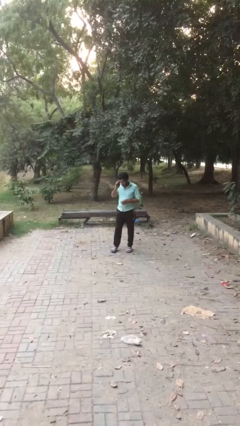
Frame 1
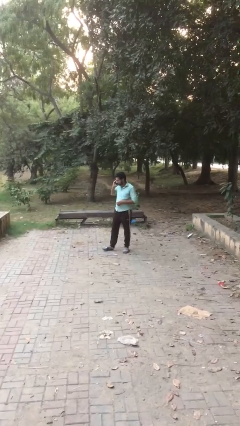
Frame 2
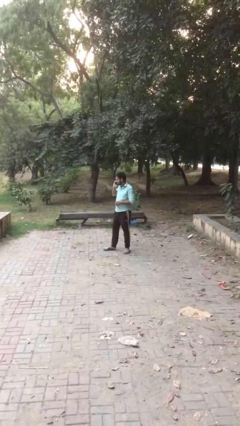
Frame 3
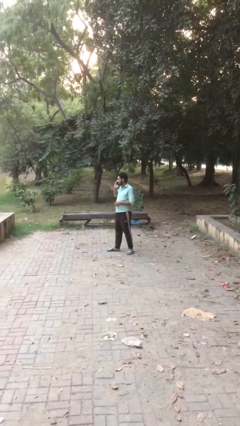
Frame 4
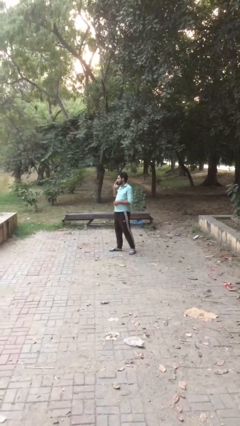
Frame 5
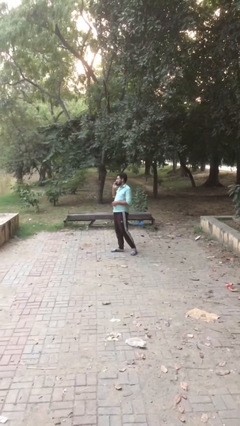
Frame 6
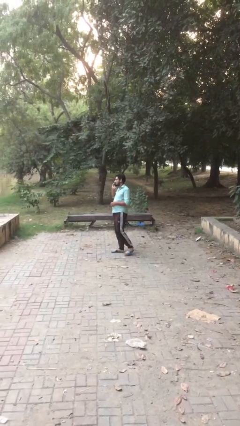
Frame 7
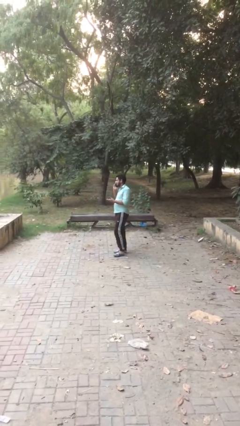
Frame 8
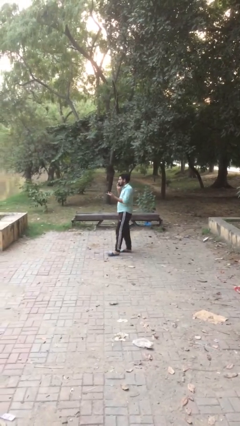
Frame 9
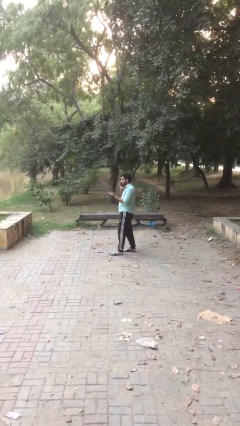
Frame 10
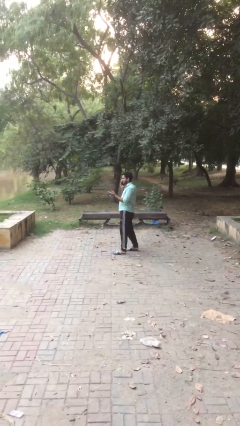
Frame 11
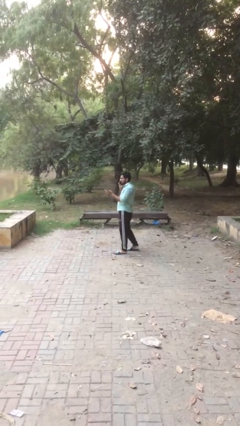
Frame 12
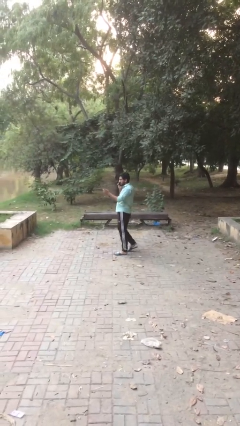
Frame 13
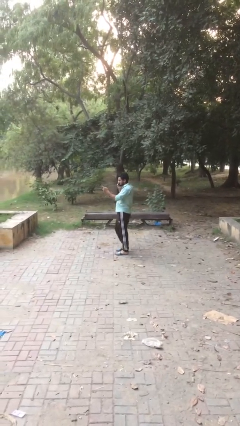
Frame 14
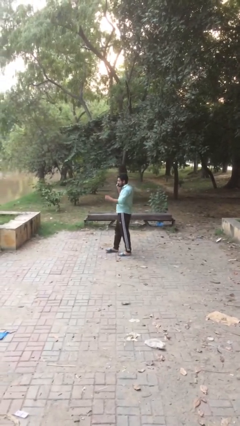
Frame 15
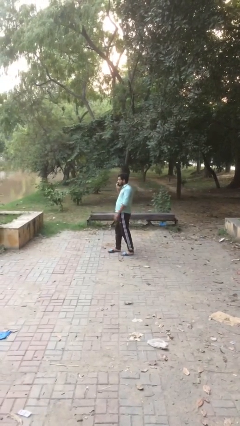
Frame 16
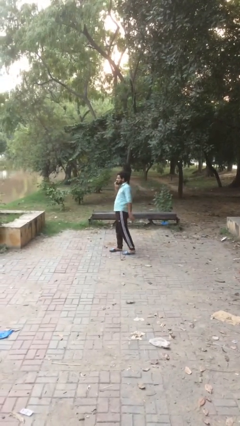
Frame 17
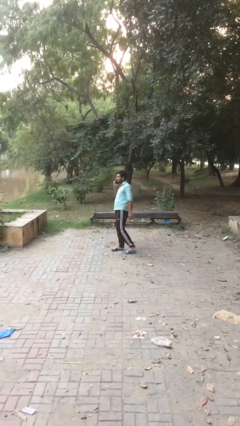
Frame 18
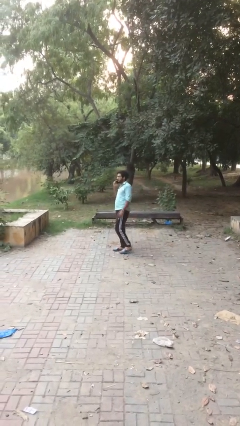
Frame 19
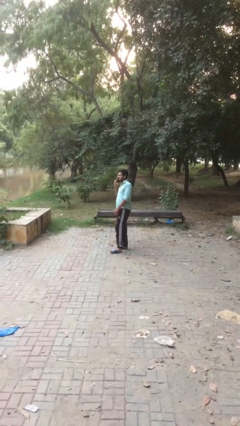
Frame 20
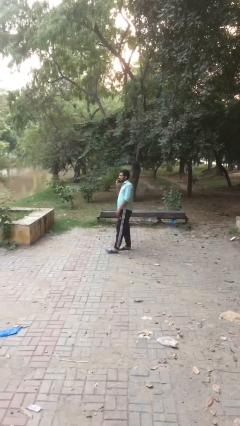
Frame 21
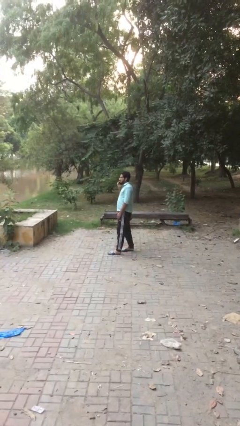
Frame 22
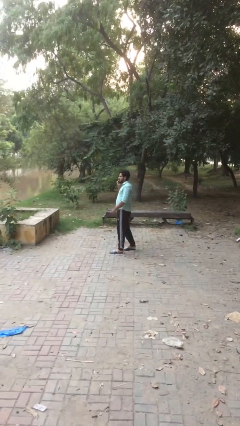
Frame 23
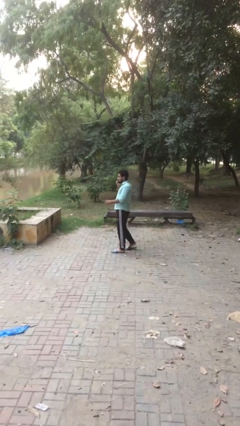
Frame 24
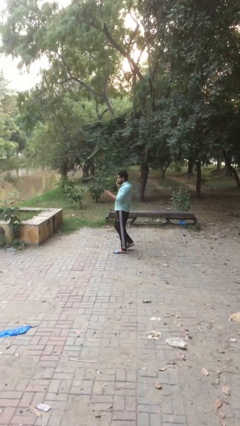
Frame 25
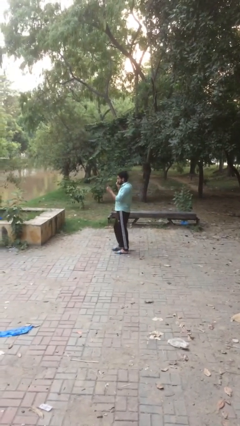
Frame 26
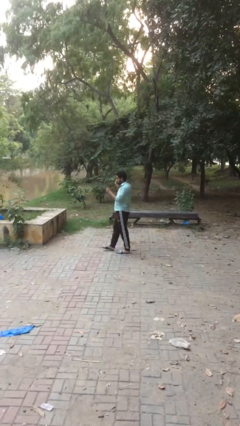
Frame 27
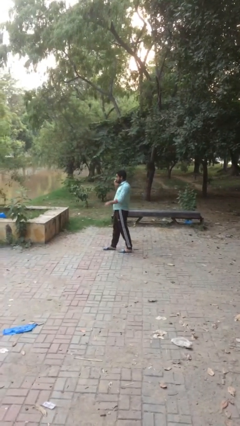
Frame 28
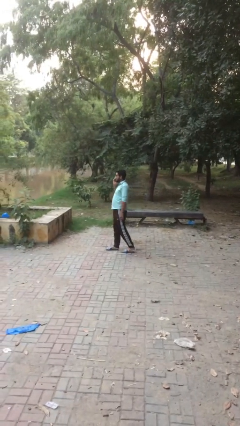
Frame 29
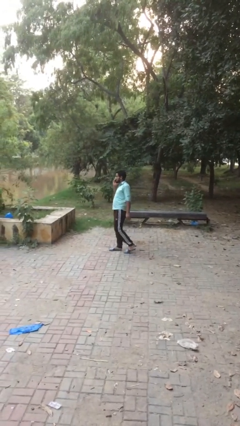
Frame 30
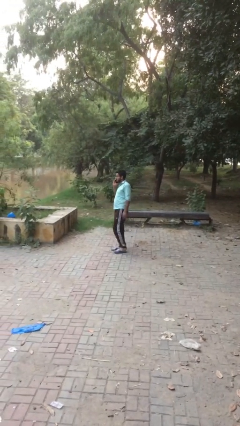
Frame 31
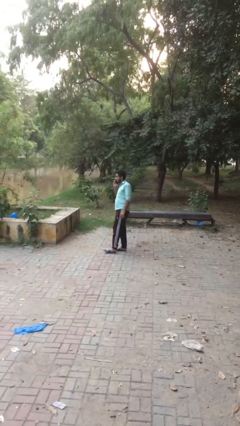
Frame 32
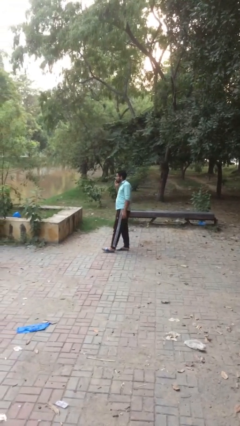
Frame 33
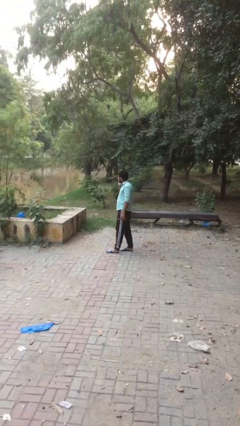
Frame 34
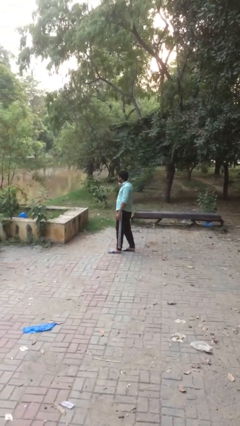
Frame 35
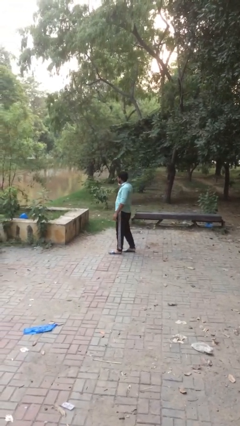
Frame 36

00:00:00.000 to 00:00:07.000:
person talks on phone

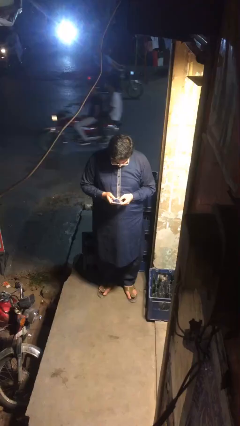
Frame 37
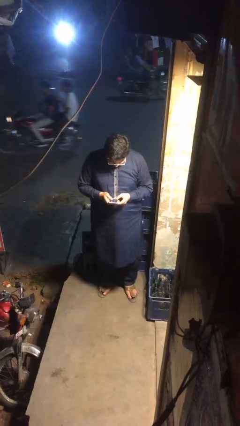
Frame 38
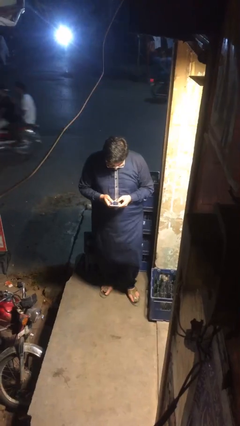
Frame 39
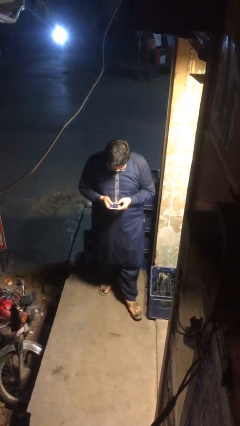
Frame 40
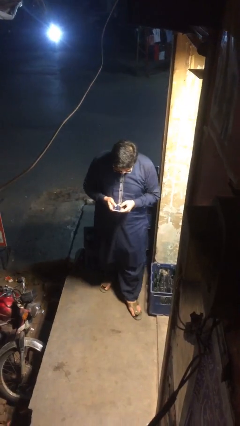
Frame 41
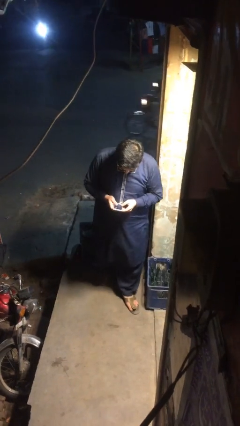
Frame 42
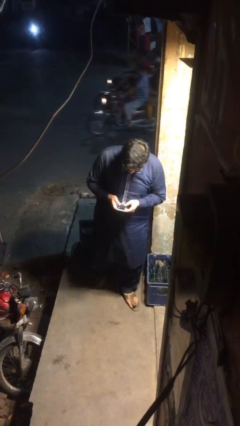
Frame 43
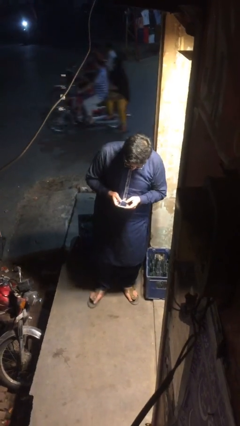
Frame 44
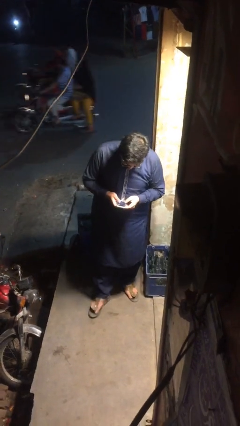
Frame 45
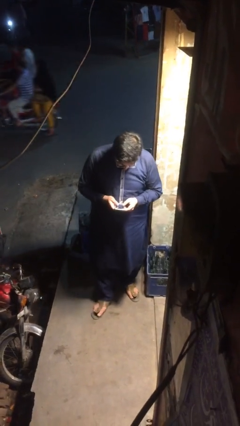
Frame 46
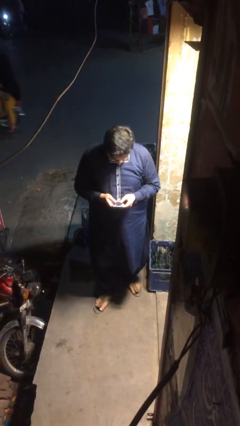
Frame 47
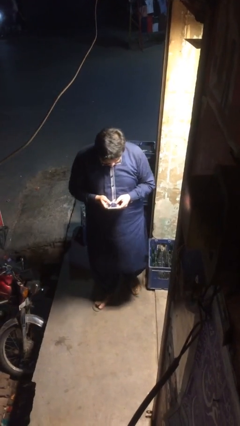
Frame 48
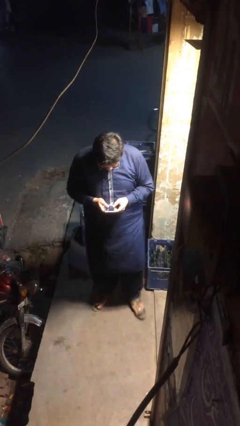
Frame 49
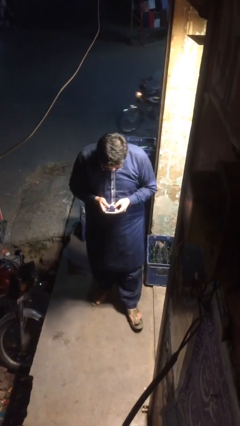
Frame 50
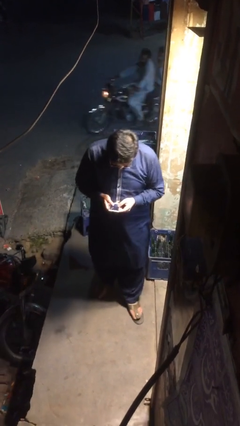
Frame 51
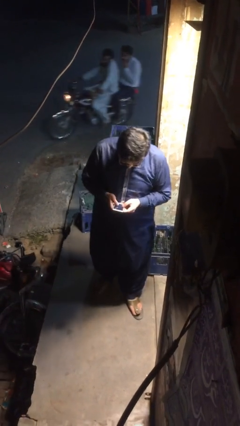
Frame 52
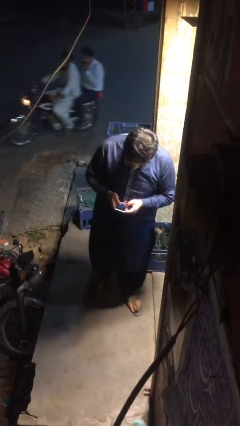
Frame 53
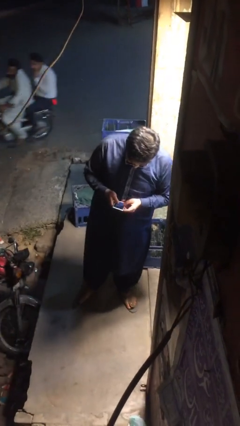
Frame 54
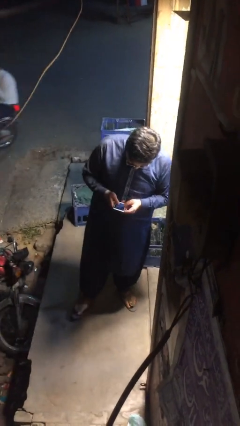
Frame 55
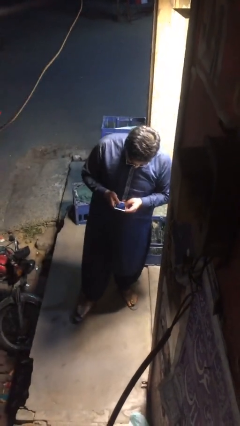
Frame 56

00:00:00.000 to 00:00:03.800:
person texts on phone

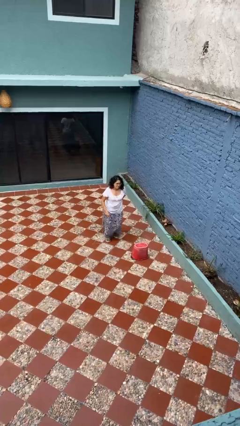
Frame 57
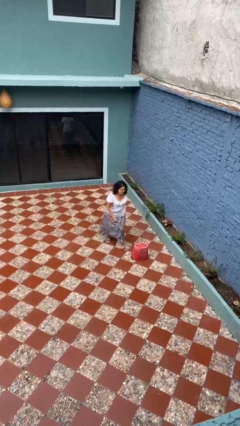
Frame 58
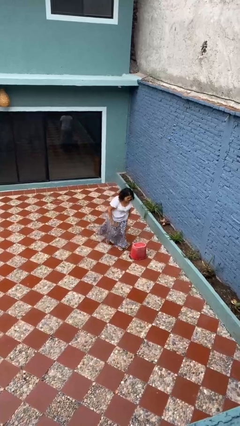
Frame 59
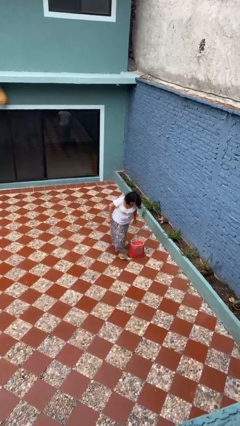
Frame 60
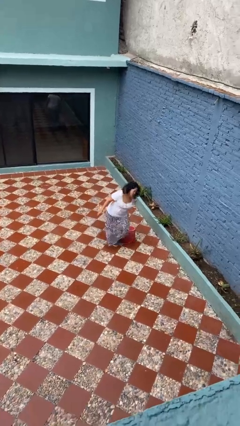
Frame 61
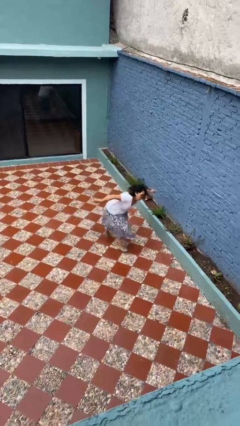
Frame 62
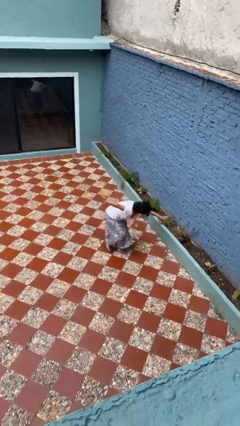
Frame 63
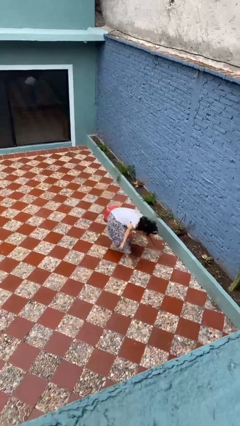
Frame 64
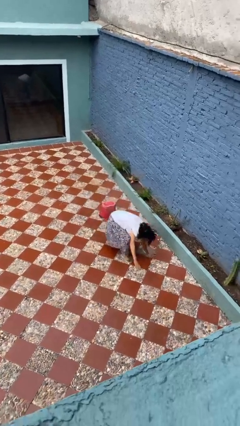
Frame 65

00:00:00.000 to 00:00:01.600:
person trips on object on floor

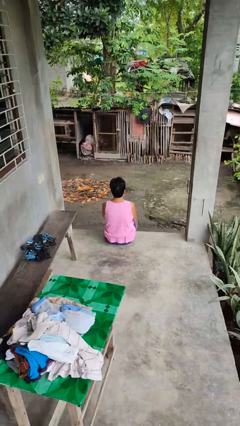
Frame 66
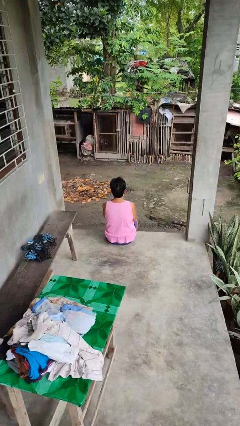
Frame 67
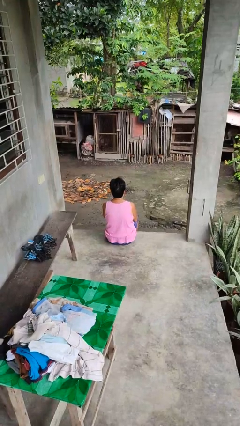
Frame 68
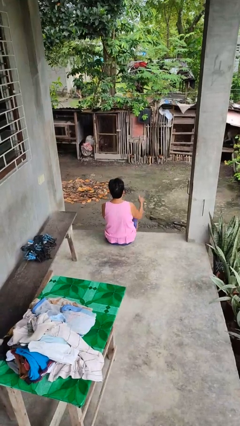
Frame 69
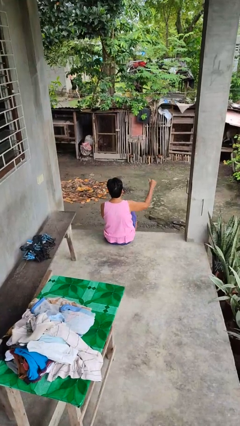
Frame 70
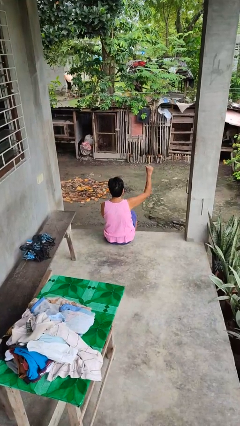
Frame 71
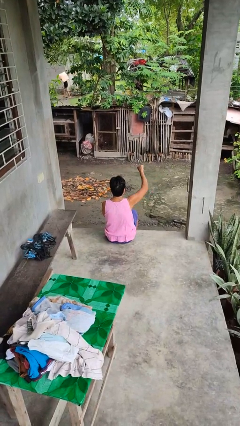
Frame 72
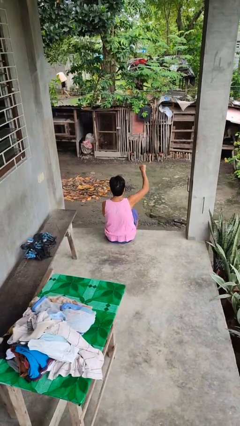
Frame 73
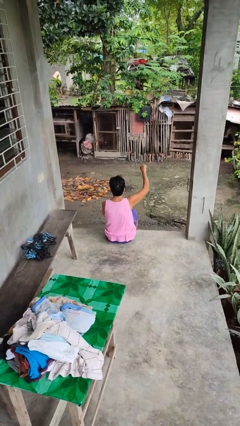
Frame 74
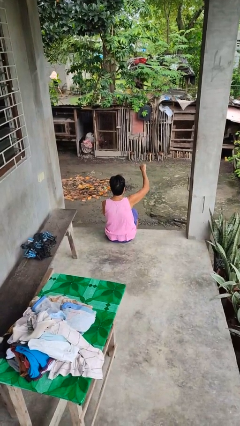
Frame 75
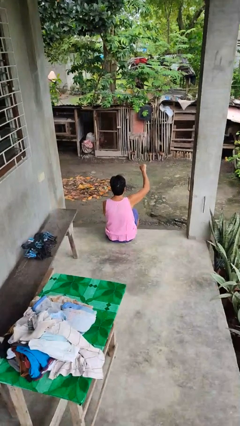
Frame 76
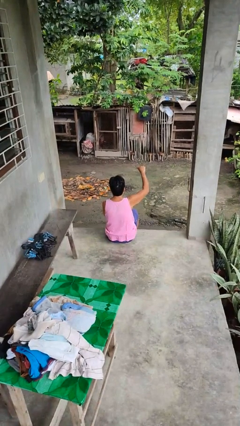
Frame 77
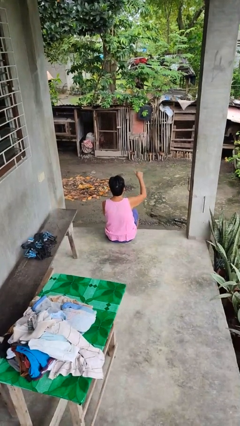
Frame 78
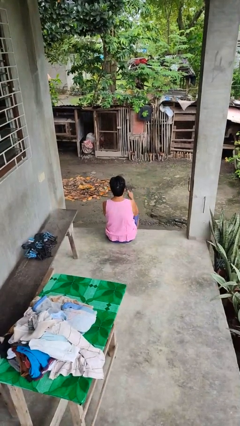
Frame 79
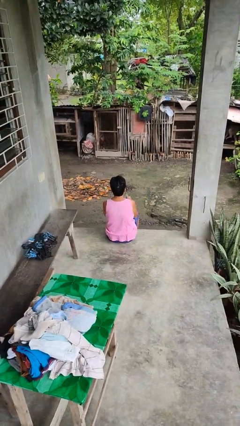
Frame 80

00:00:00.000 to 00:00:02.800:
person gestures thumbs down

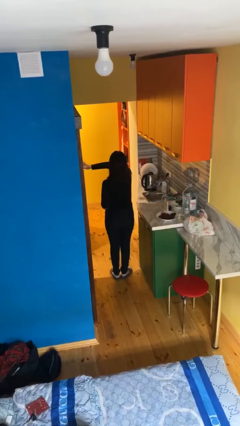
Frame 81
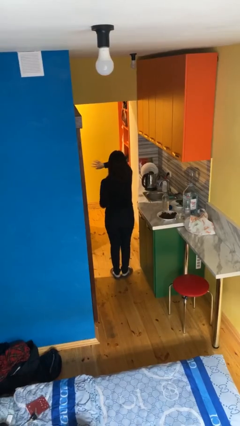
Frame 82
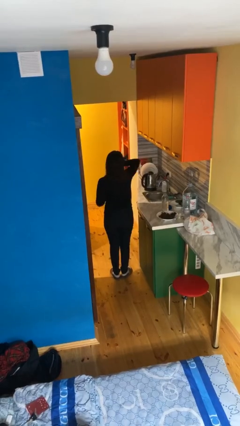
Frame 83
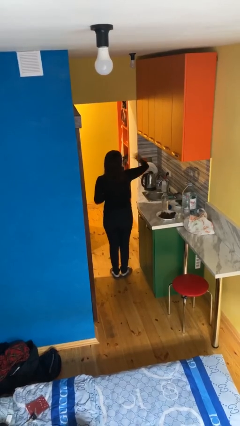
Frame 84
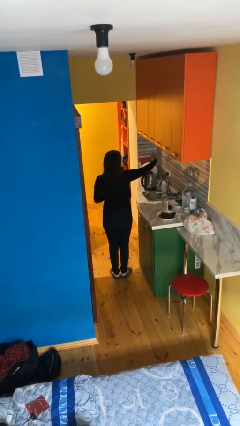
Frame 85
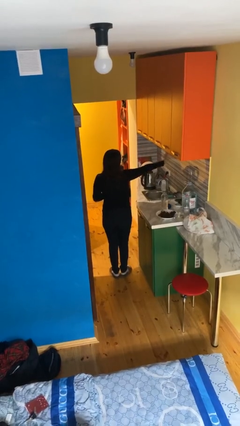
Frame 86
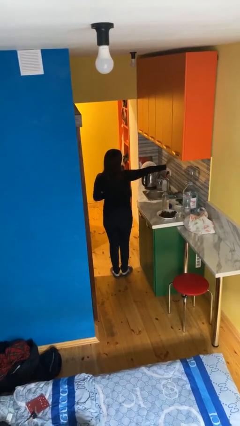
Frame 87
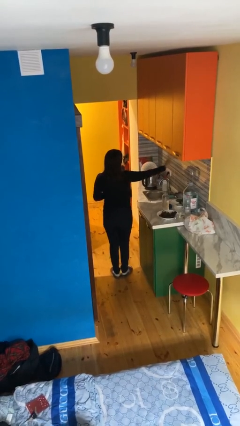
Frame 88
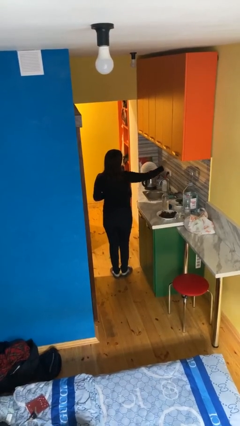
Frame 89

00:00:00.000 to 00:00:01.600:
person gestures swipe right

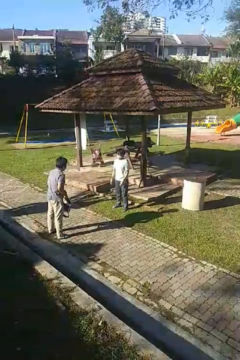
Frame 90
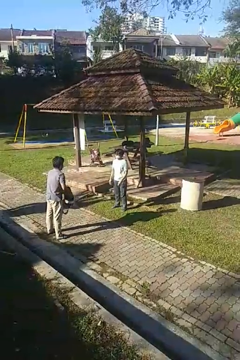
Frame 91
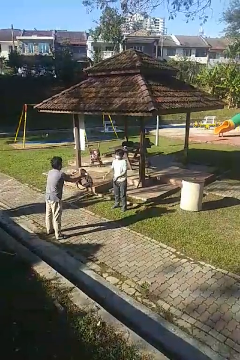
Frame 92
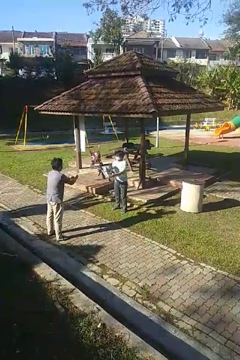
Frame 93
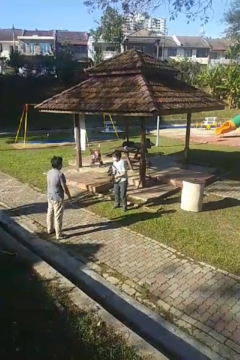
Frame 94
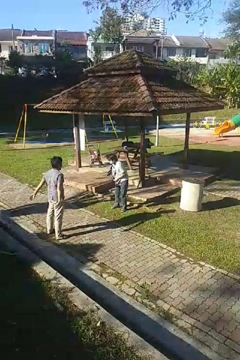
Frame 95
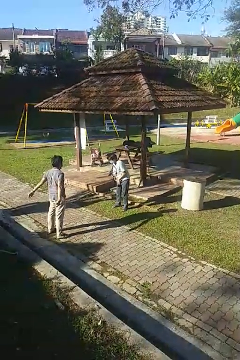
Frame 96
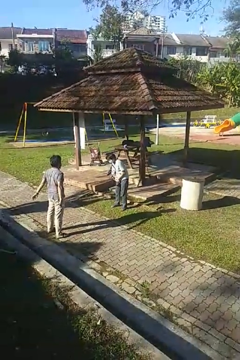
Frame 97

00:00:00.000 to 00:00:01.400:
person catches object from person
